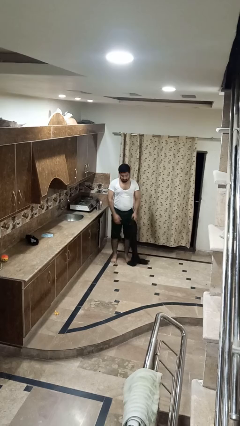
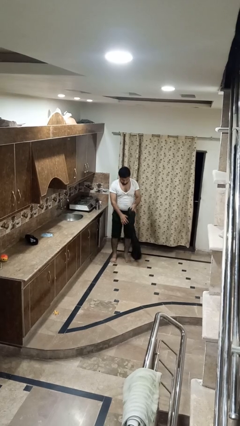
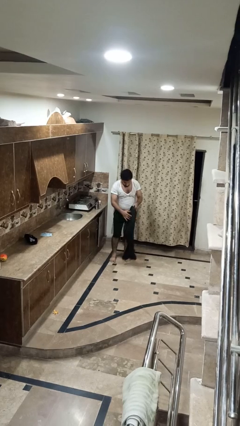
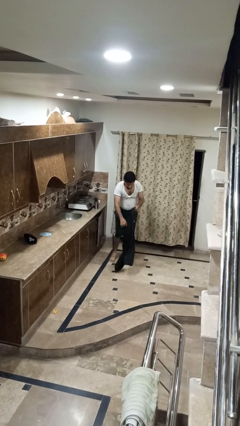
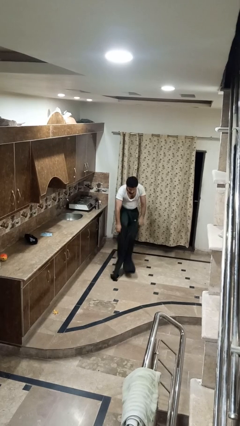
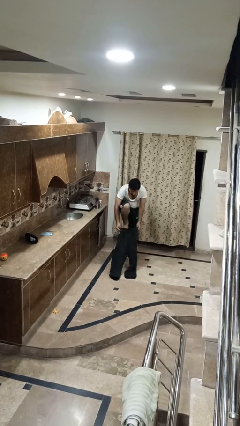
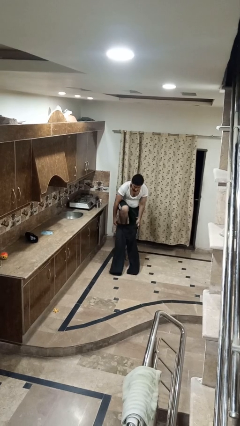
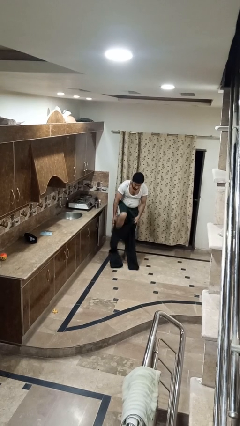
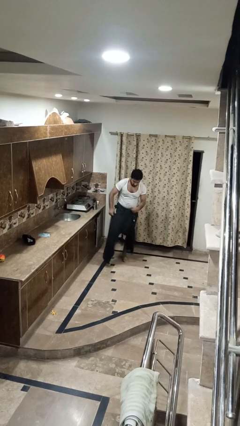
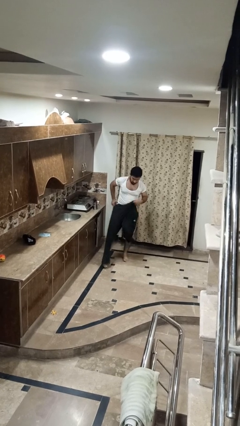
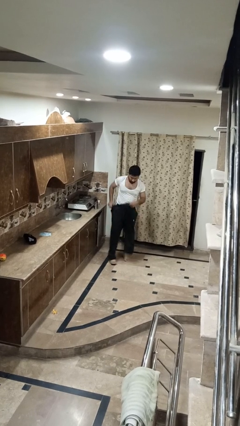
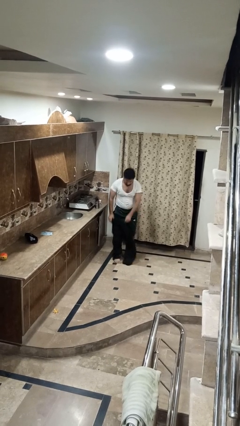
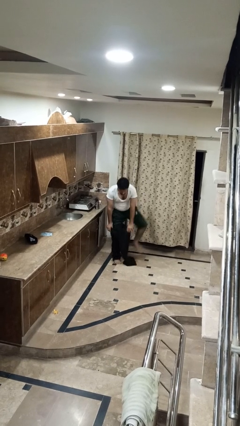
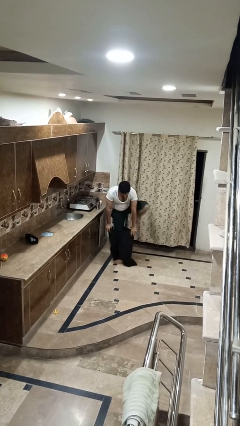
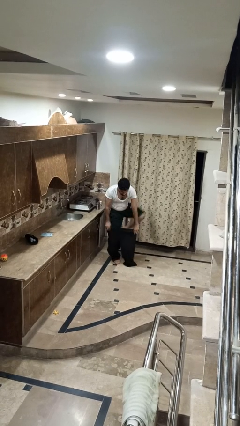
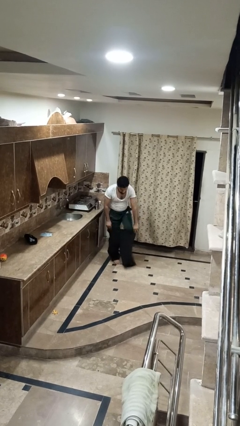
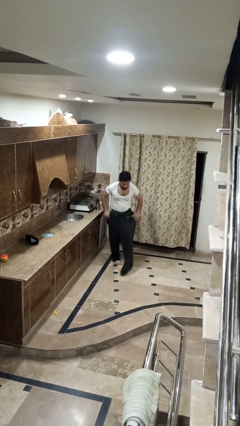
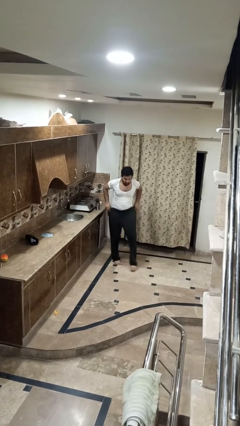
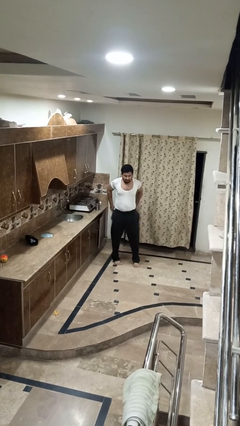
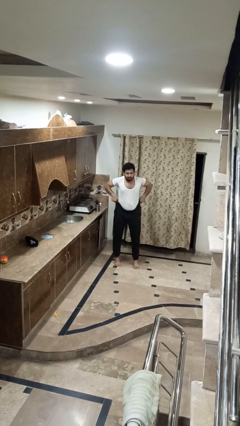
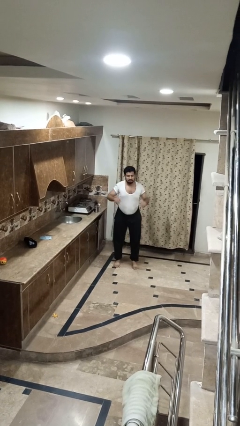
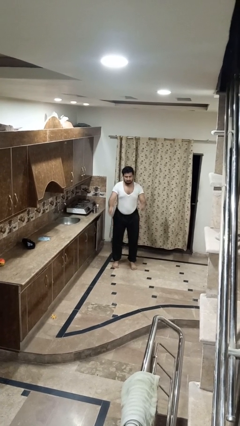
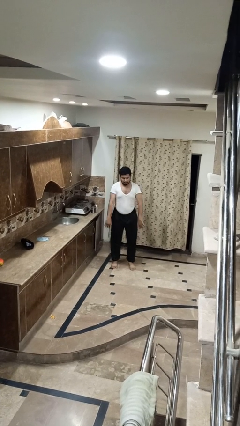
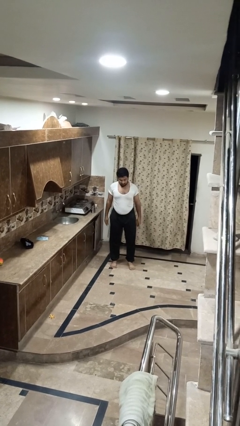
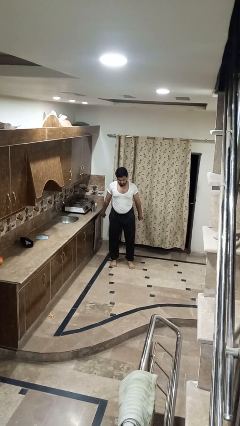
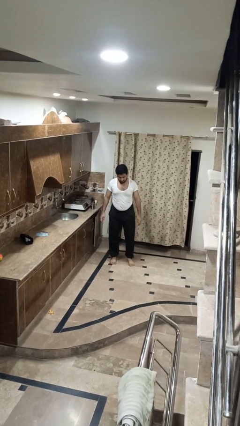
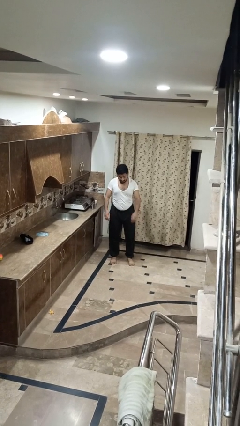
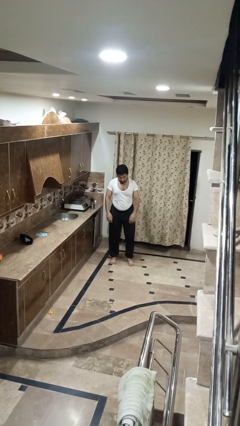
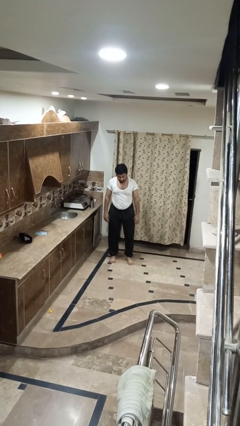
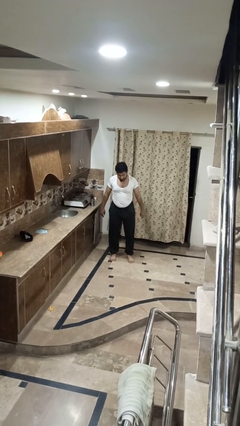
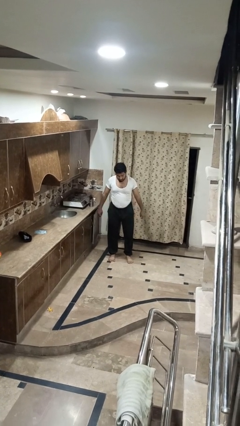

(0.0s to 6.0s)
person puts on pants

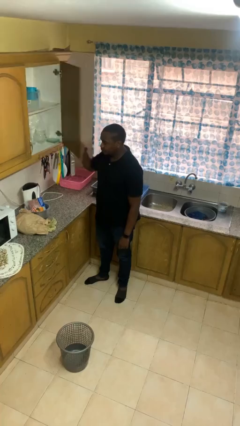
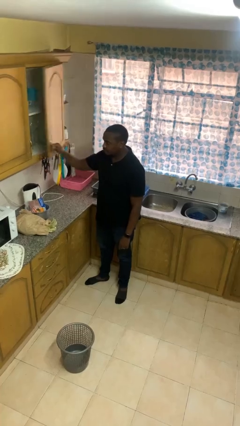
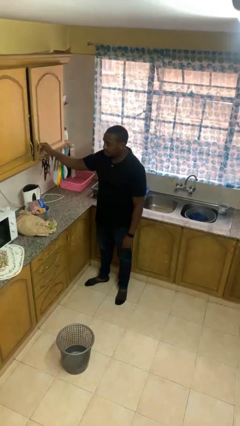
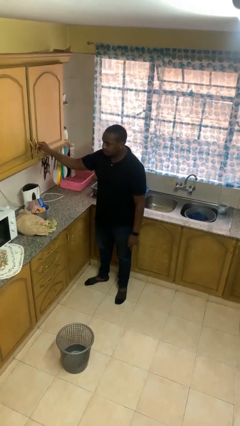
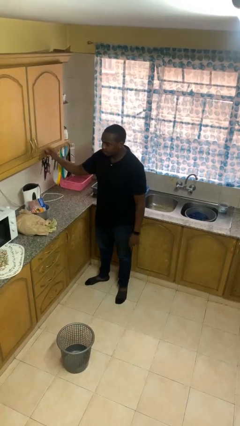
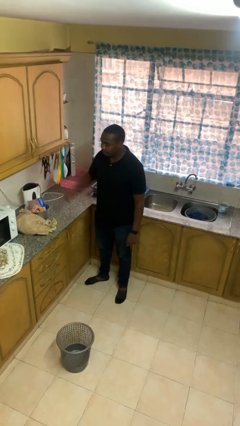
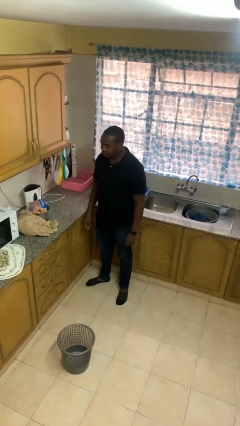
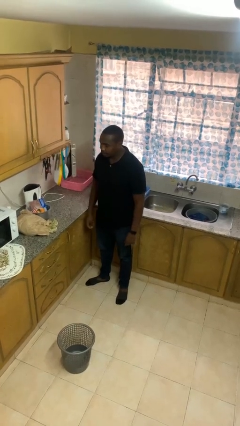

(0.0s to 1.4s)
person closes cabinet

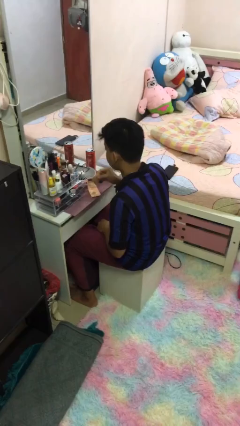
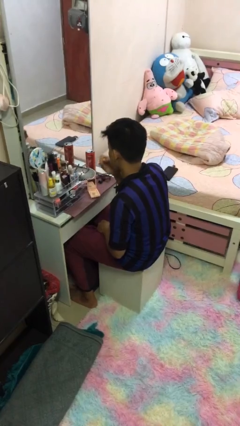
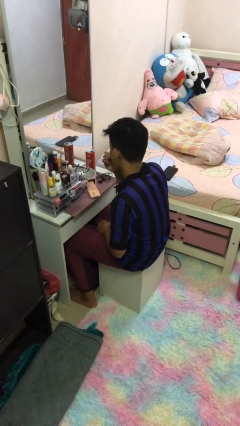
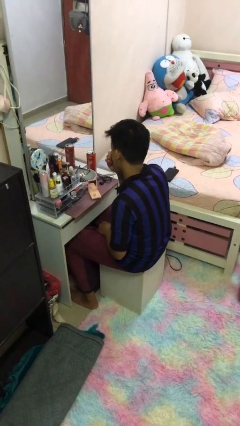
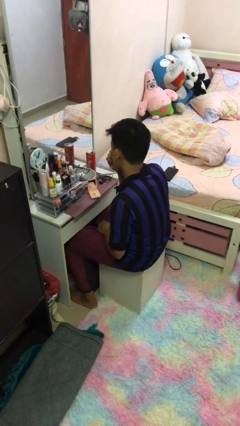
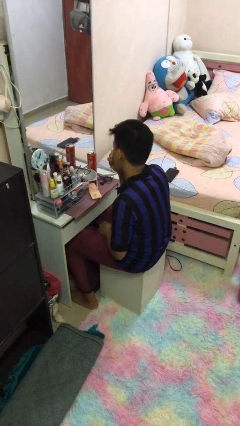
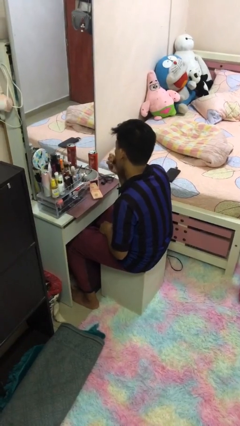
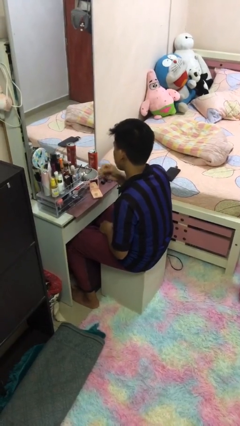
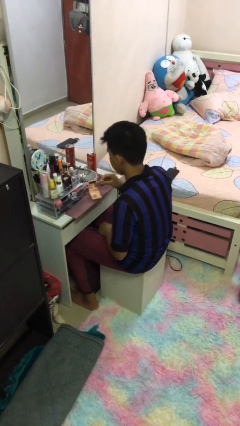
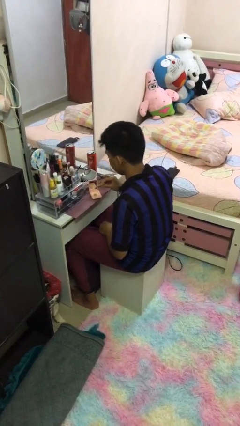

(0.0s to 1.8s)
person applies foundation makeup

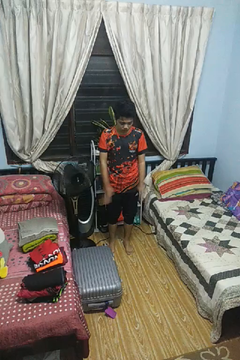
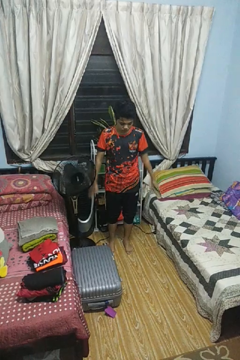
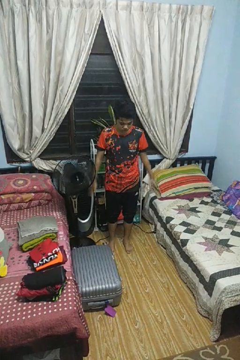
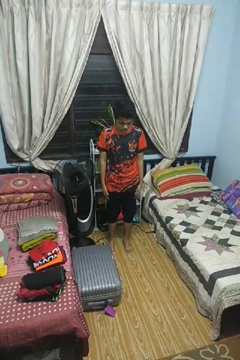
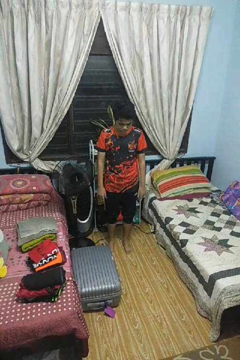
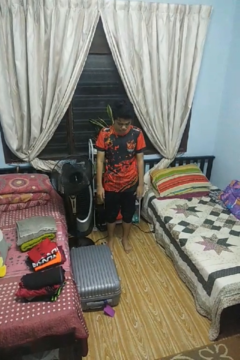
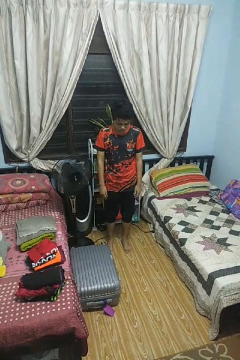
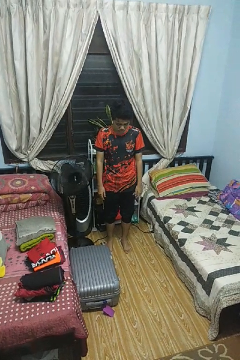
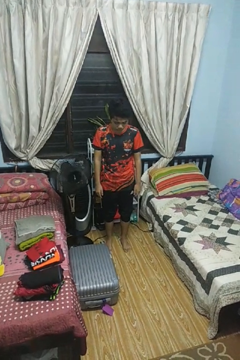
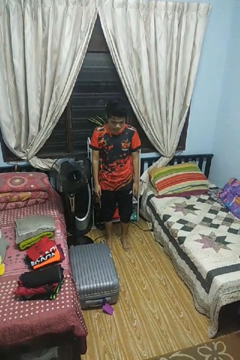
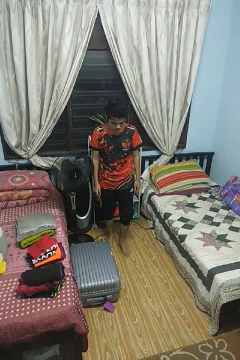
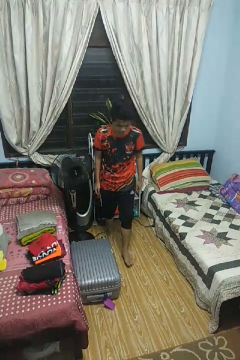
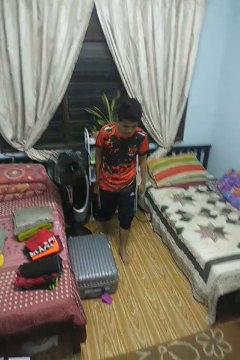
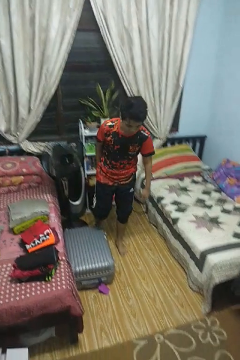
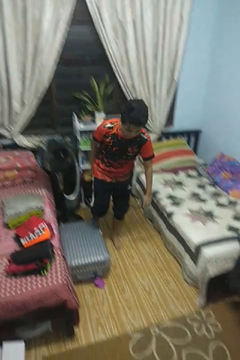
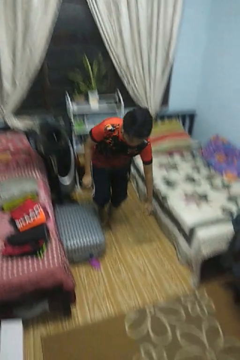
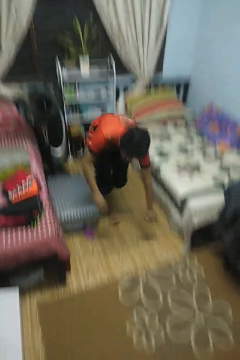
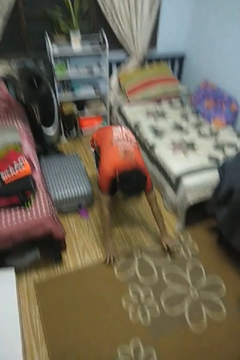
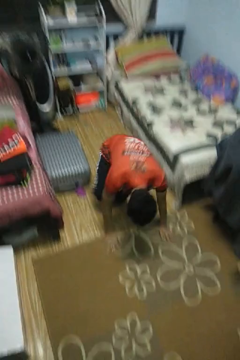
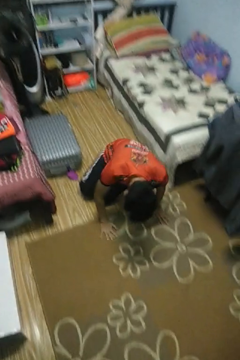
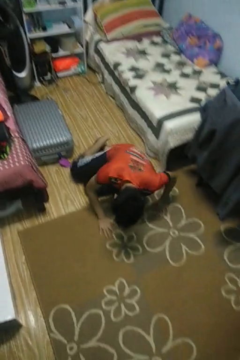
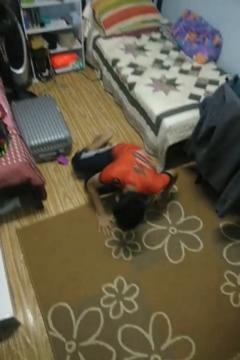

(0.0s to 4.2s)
person trips on object on floor

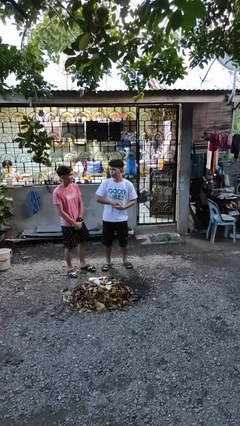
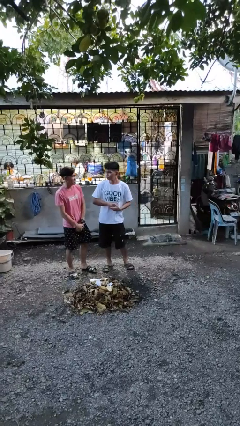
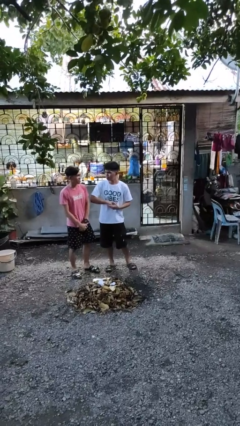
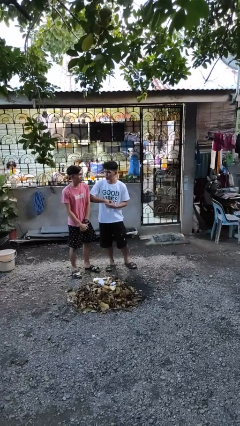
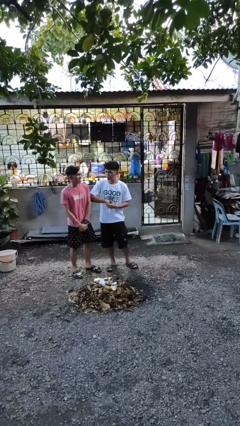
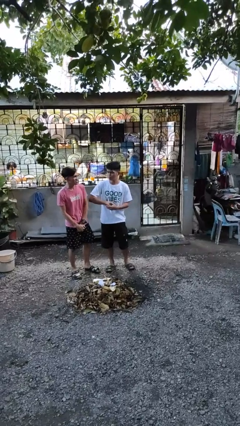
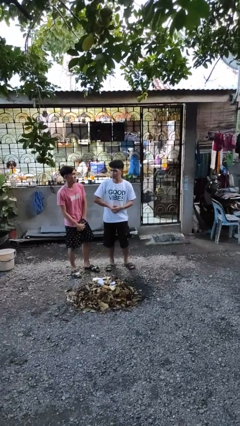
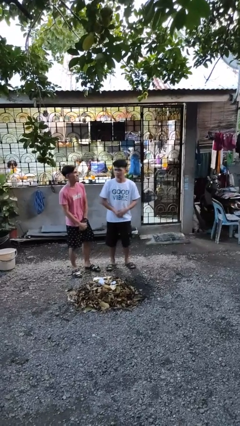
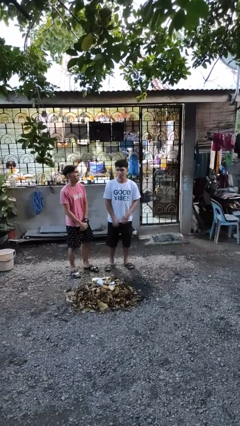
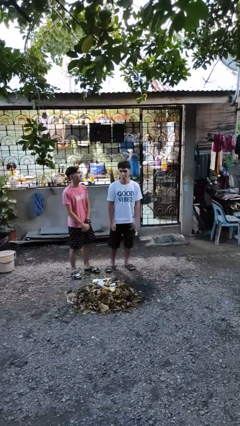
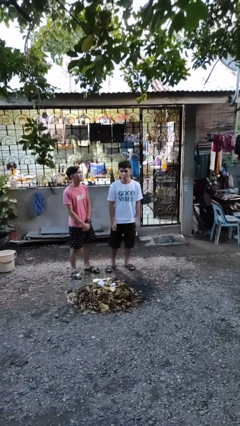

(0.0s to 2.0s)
person nudges person with elbow

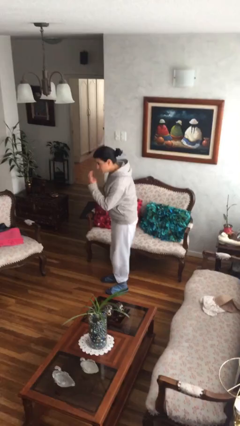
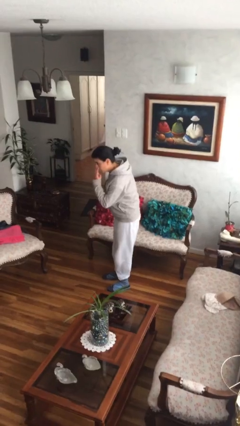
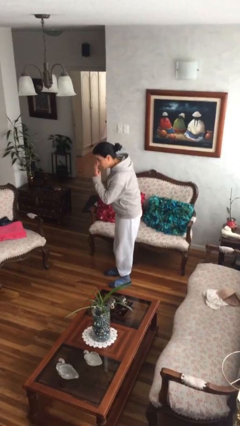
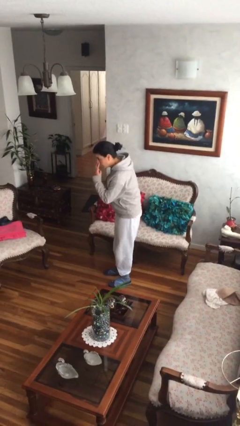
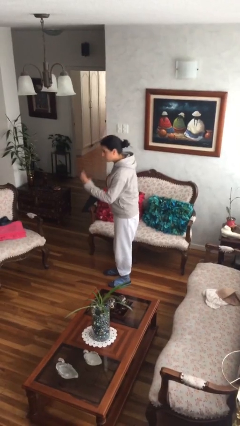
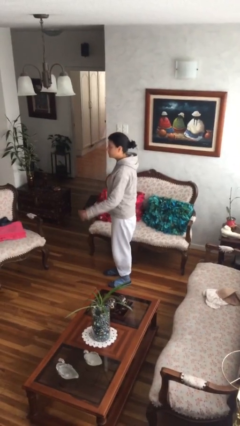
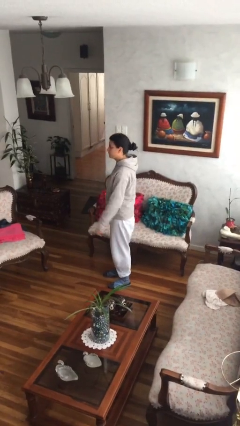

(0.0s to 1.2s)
person gestures watch closely

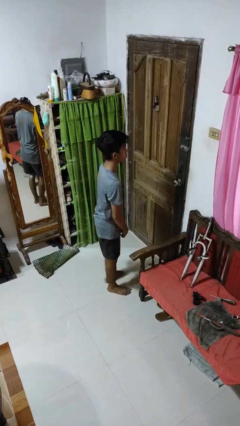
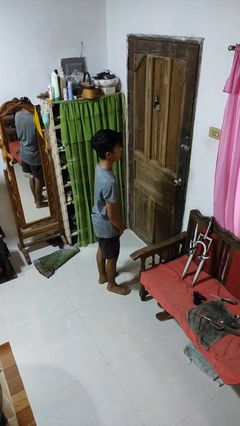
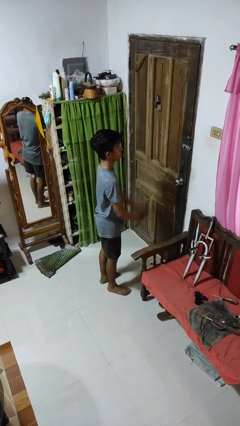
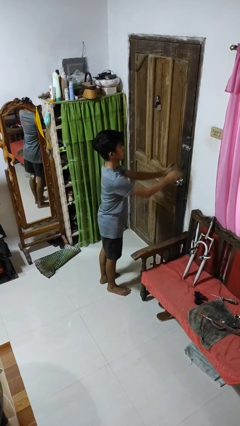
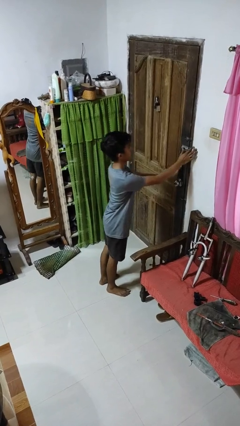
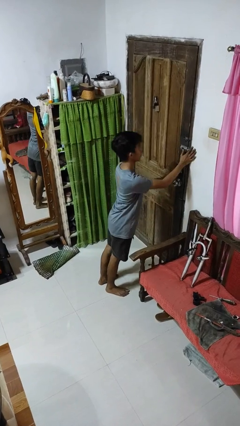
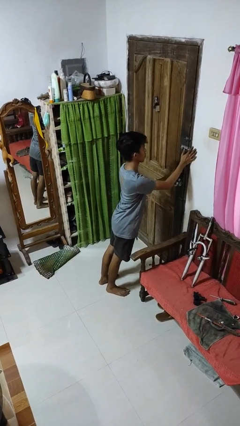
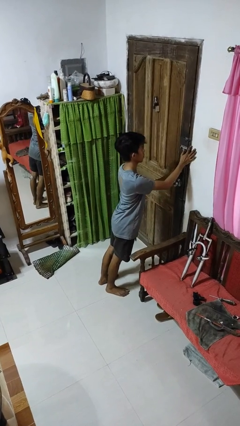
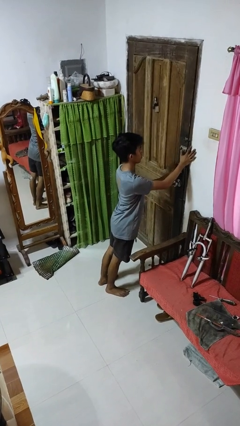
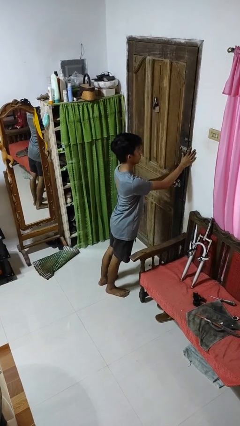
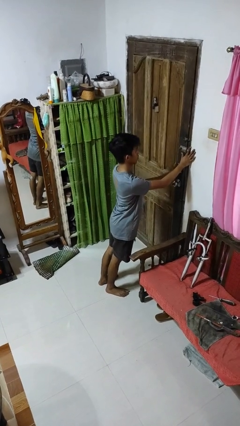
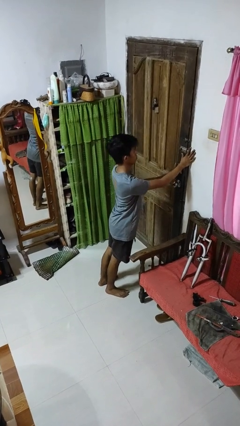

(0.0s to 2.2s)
person unlocks door with keys
